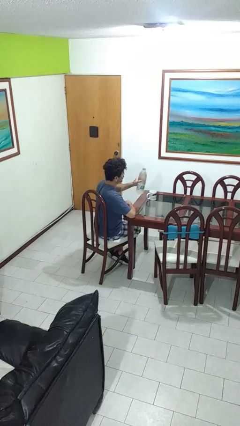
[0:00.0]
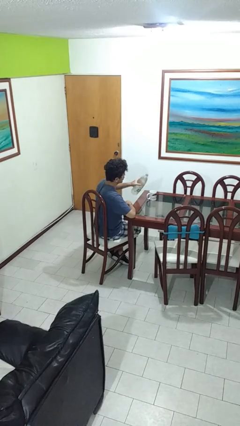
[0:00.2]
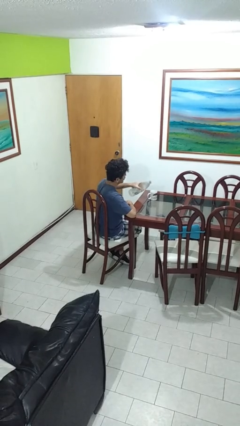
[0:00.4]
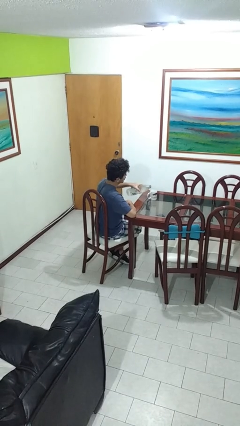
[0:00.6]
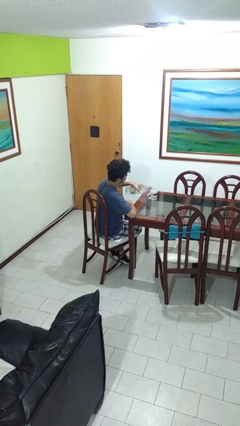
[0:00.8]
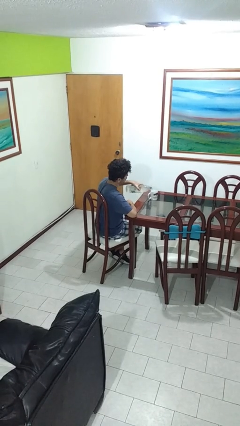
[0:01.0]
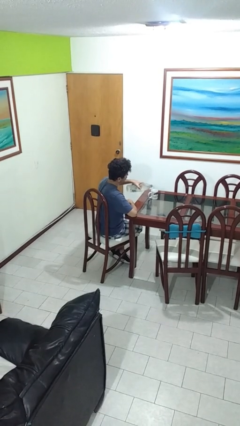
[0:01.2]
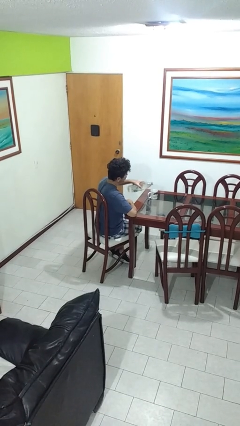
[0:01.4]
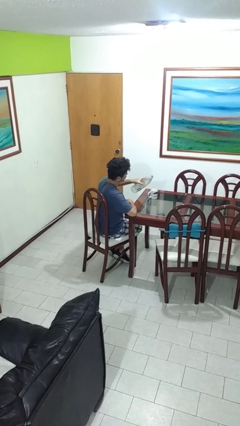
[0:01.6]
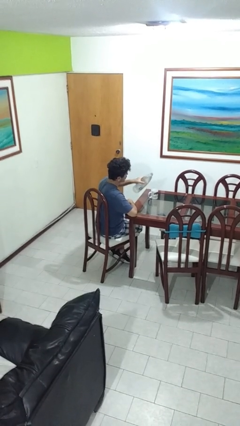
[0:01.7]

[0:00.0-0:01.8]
person pours liquid into cup

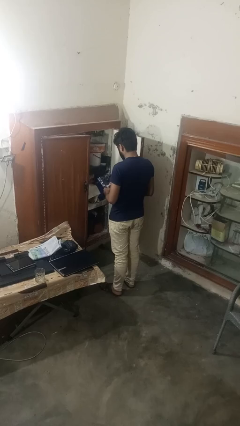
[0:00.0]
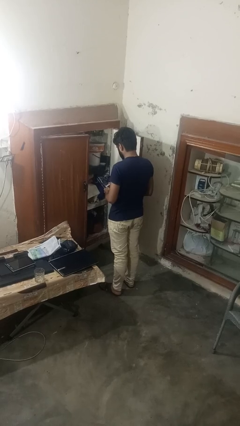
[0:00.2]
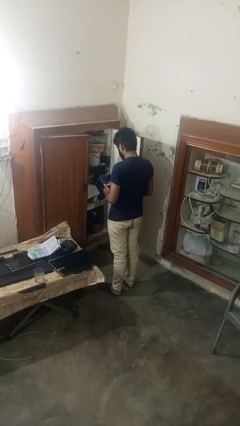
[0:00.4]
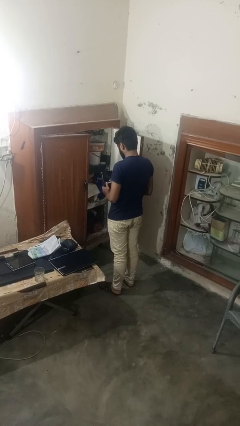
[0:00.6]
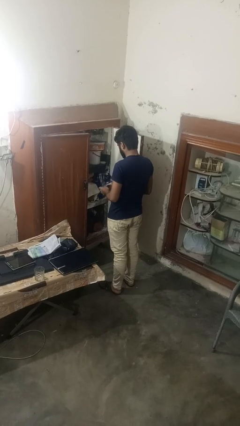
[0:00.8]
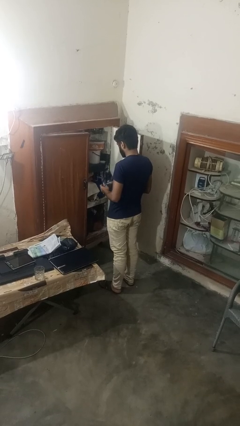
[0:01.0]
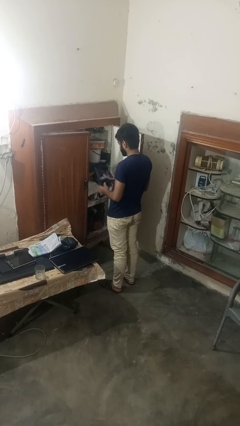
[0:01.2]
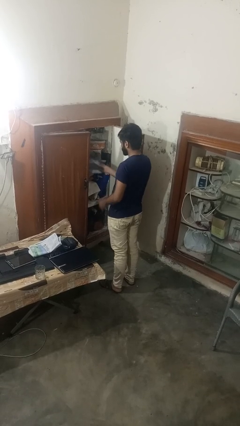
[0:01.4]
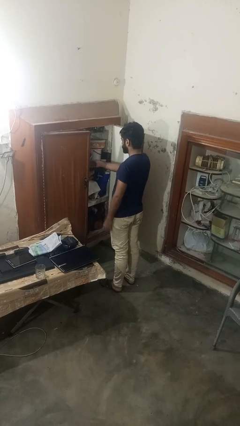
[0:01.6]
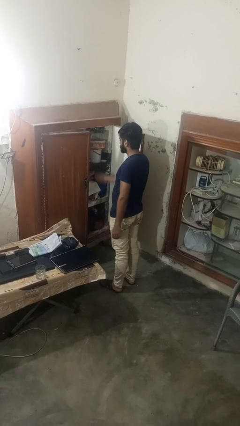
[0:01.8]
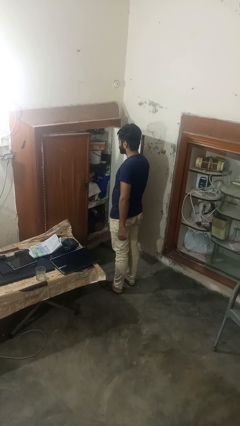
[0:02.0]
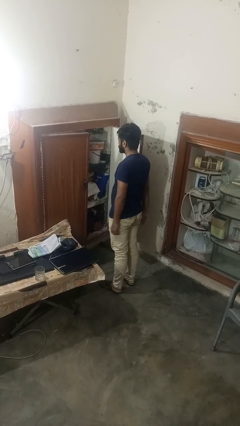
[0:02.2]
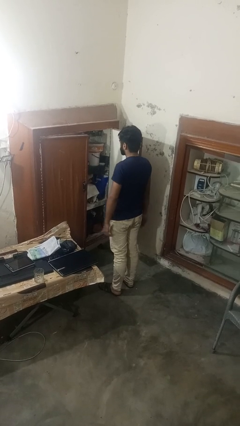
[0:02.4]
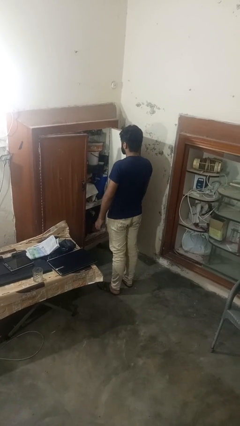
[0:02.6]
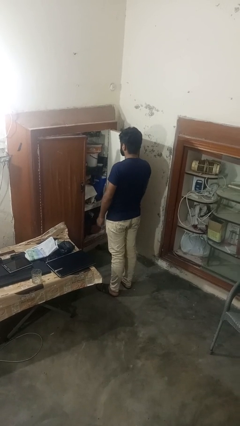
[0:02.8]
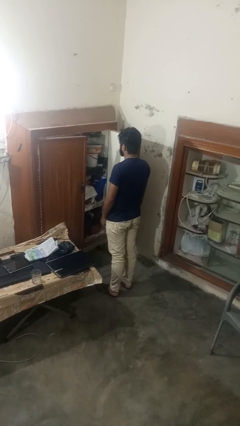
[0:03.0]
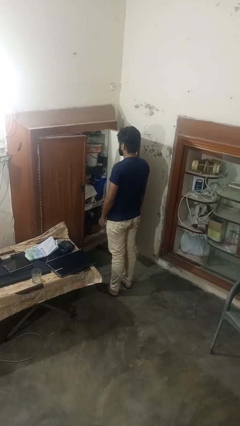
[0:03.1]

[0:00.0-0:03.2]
person puts down object into cabinet

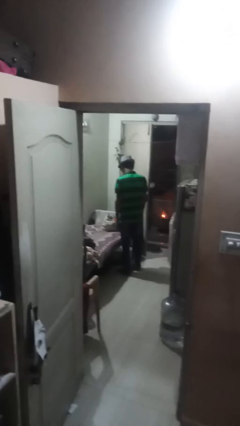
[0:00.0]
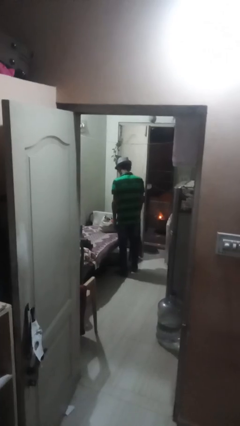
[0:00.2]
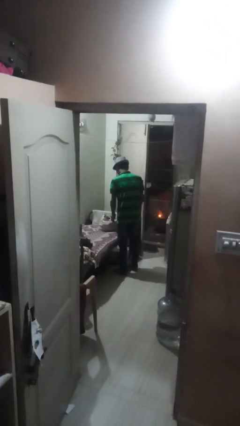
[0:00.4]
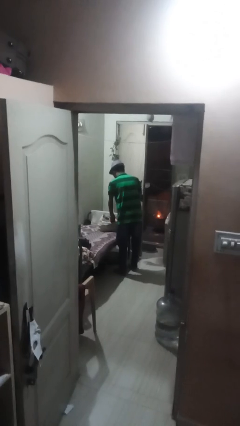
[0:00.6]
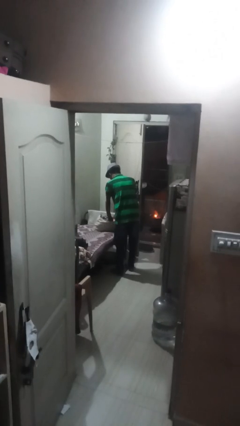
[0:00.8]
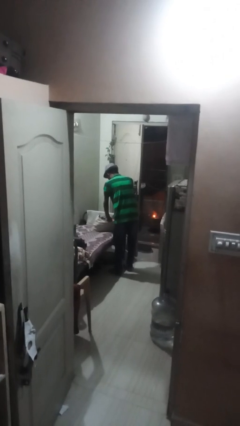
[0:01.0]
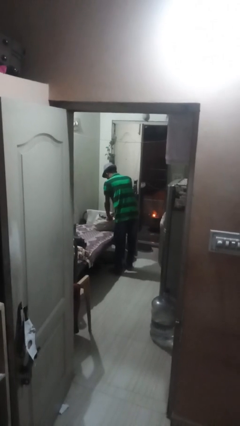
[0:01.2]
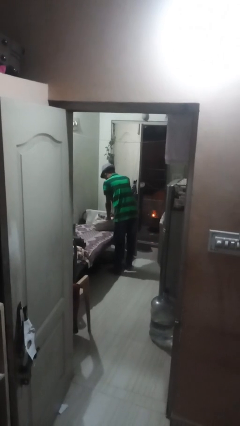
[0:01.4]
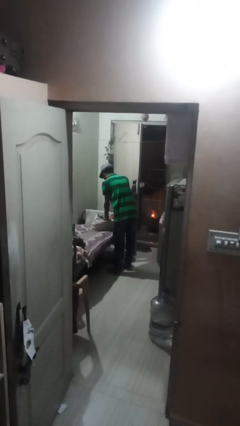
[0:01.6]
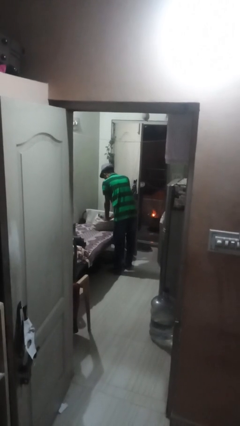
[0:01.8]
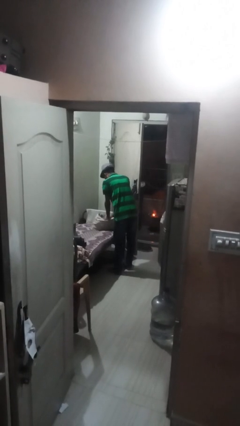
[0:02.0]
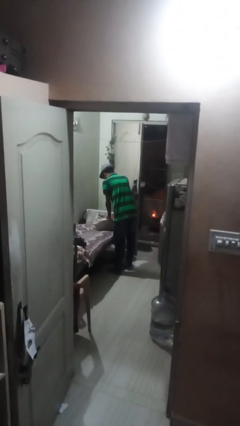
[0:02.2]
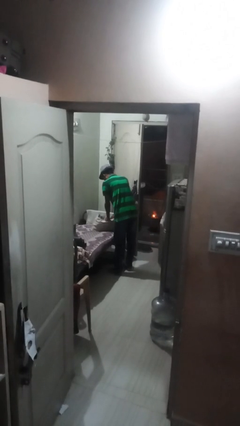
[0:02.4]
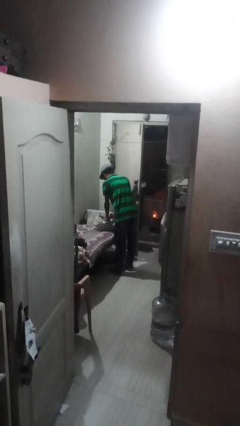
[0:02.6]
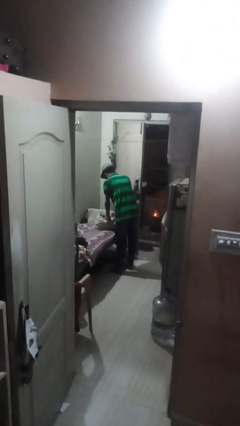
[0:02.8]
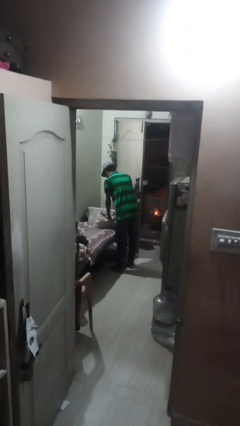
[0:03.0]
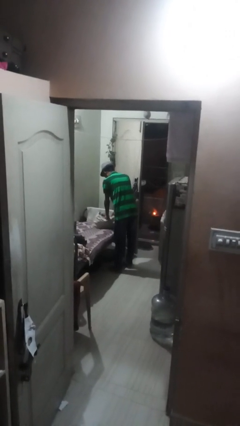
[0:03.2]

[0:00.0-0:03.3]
person searches in bag

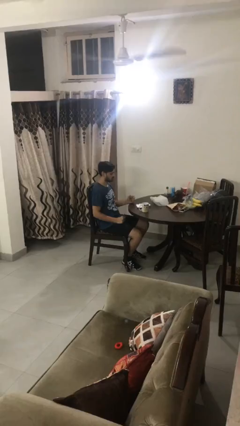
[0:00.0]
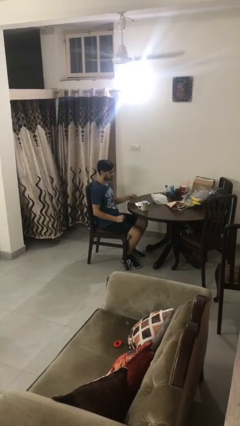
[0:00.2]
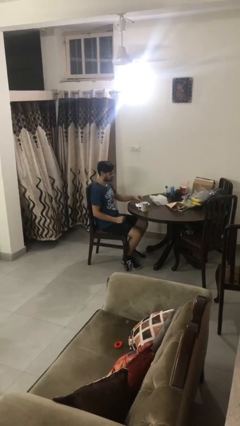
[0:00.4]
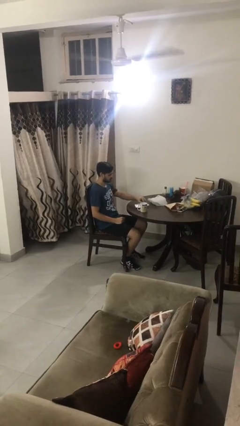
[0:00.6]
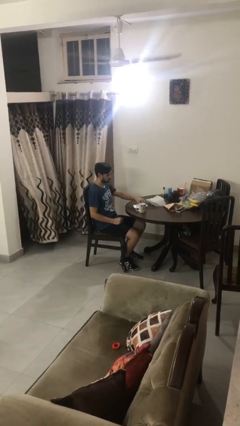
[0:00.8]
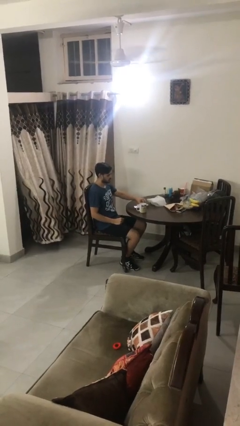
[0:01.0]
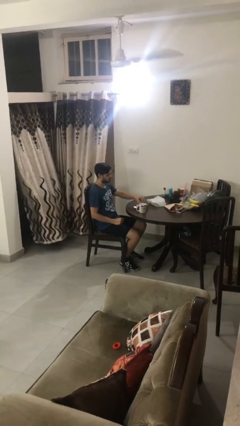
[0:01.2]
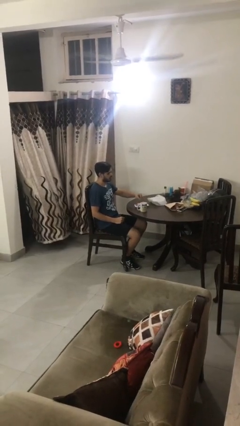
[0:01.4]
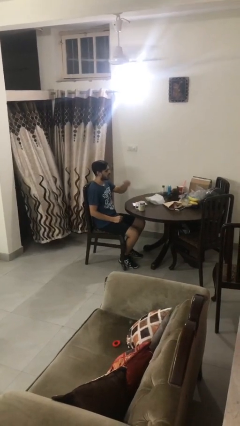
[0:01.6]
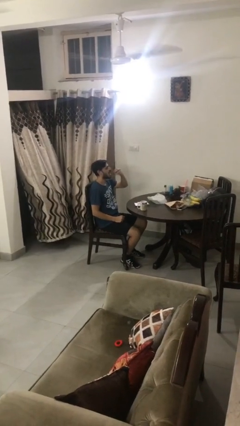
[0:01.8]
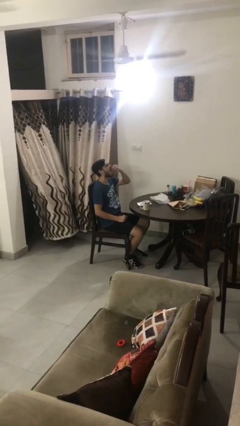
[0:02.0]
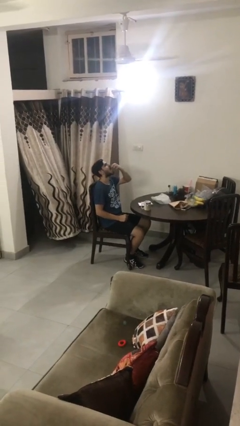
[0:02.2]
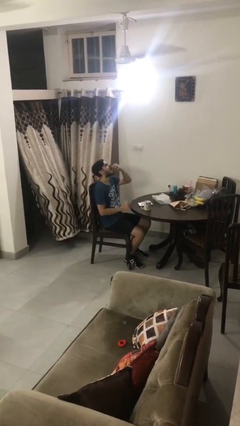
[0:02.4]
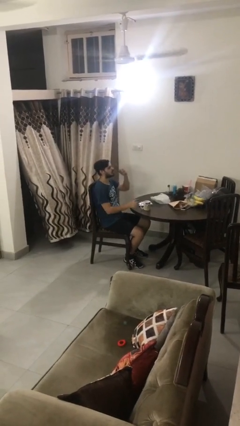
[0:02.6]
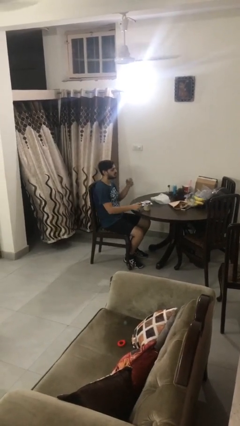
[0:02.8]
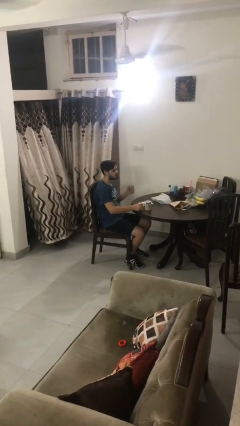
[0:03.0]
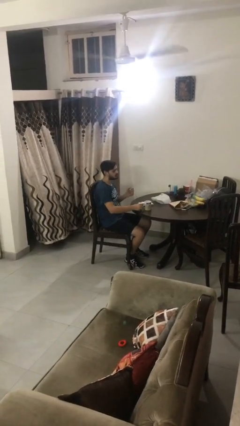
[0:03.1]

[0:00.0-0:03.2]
person takes medicine pills

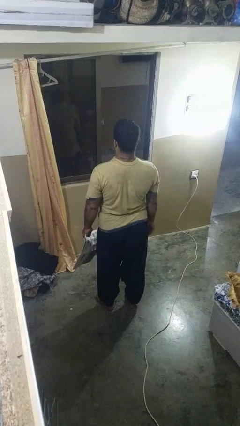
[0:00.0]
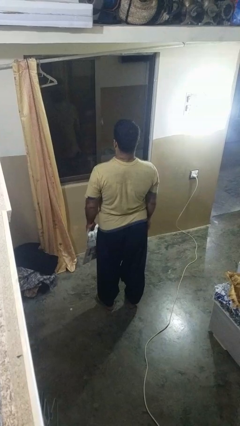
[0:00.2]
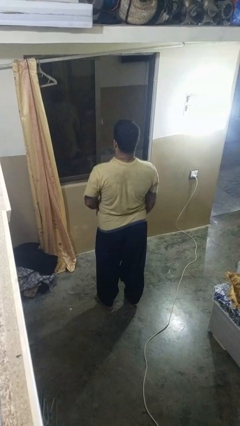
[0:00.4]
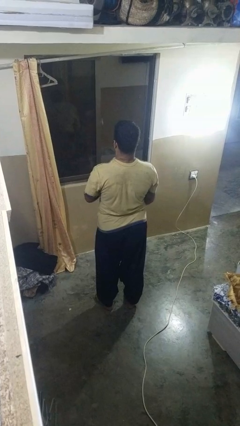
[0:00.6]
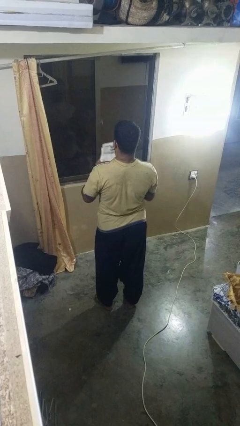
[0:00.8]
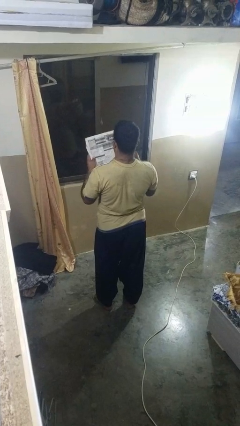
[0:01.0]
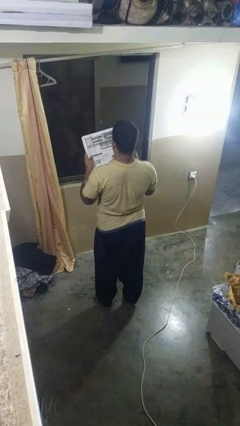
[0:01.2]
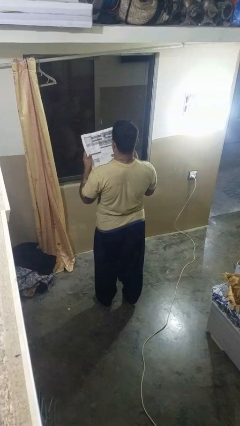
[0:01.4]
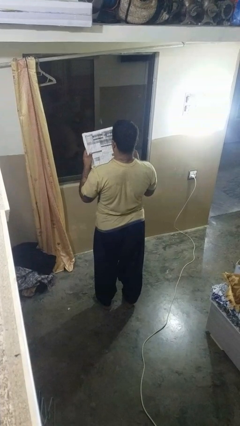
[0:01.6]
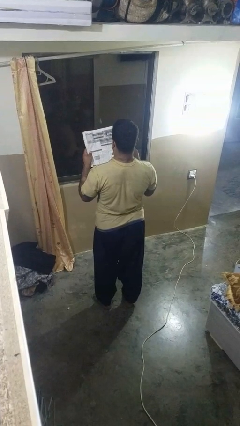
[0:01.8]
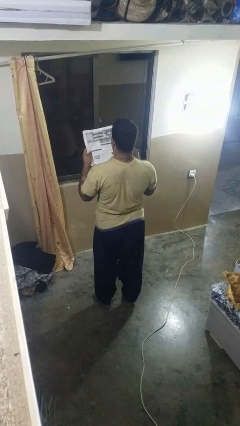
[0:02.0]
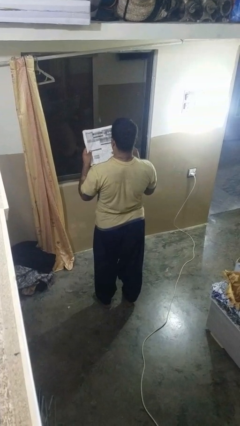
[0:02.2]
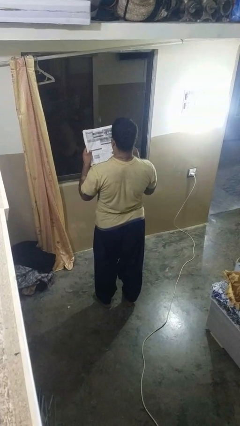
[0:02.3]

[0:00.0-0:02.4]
person reads newspaper

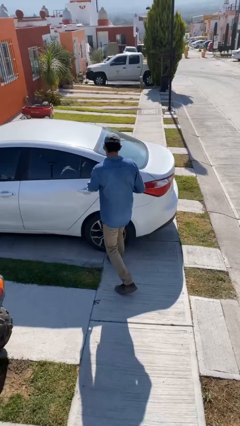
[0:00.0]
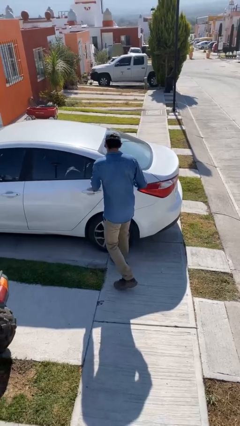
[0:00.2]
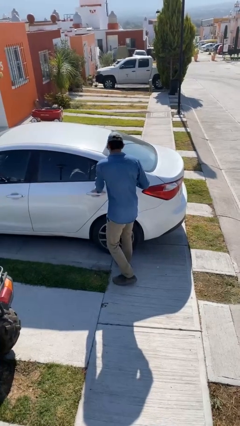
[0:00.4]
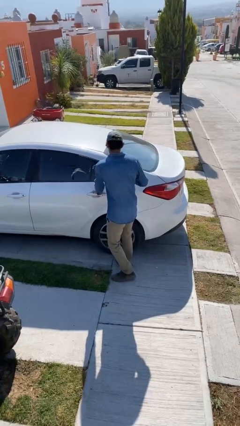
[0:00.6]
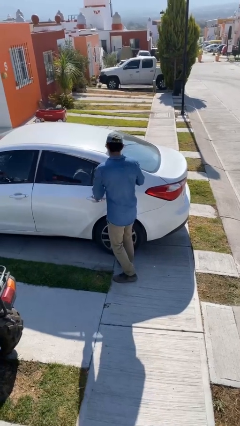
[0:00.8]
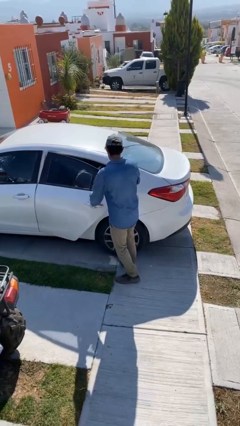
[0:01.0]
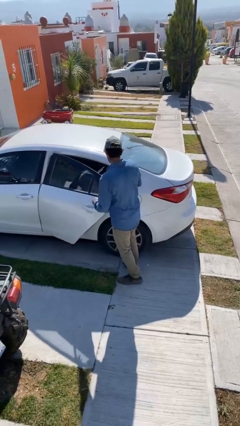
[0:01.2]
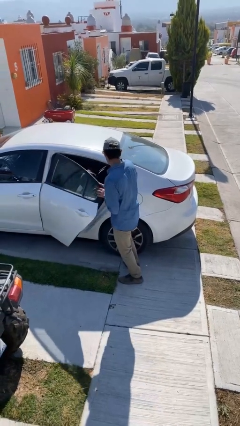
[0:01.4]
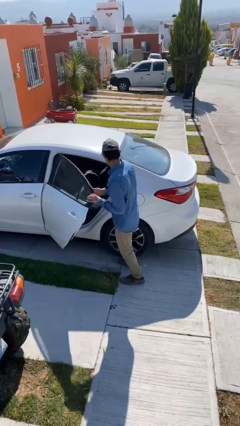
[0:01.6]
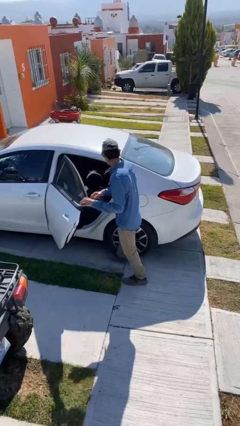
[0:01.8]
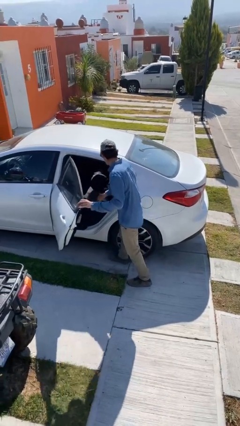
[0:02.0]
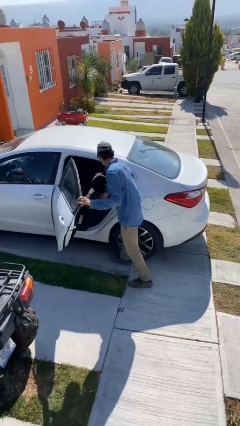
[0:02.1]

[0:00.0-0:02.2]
person opens car door

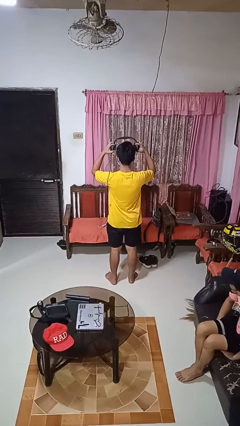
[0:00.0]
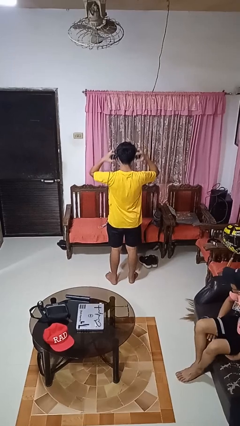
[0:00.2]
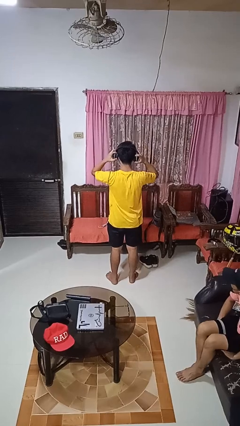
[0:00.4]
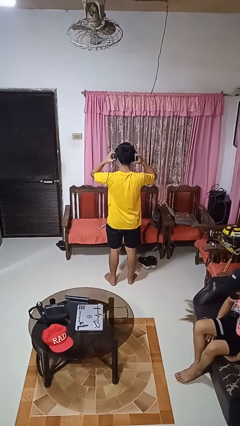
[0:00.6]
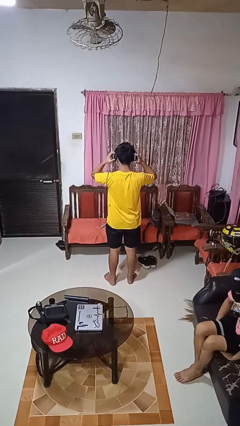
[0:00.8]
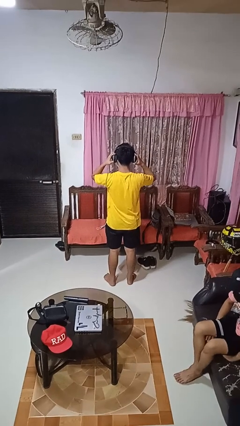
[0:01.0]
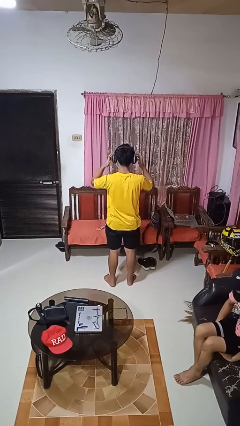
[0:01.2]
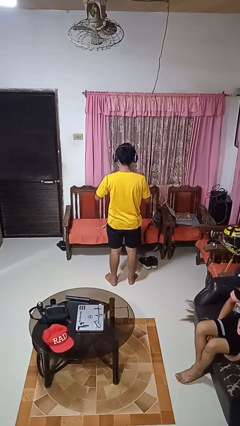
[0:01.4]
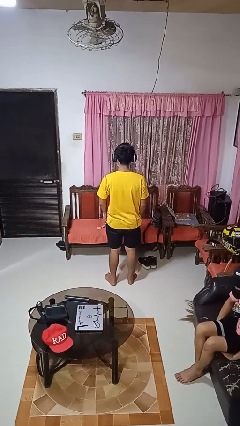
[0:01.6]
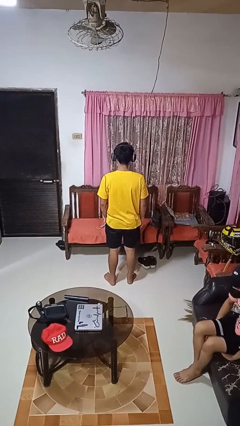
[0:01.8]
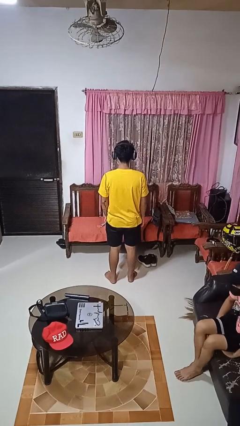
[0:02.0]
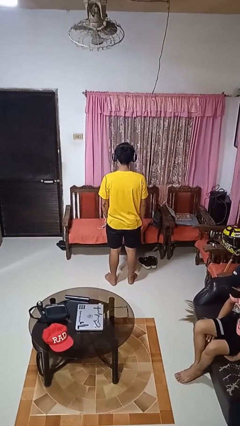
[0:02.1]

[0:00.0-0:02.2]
person puts on headphones
